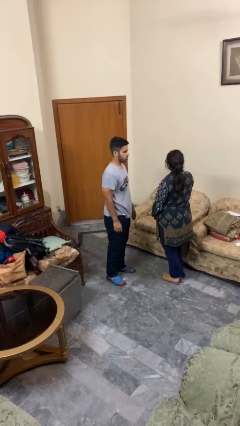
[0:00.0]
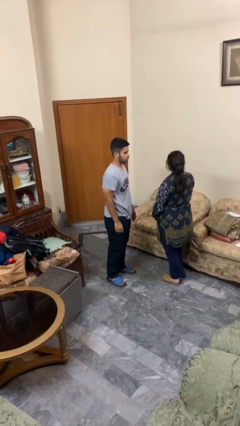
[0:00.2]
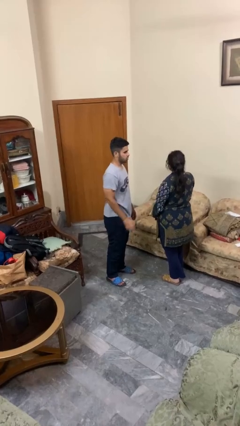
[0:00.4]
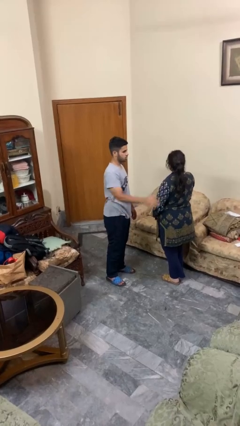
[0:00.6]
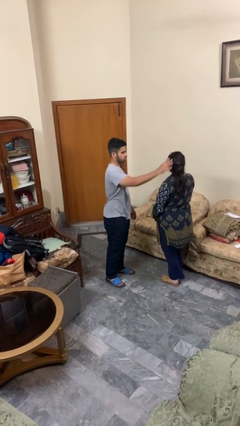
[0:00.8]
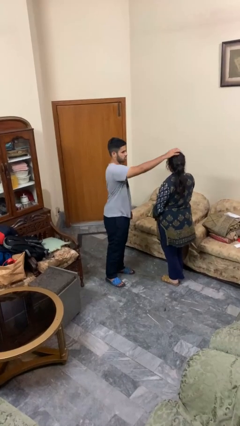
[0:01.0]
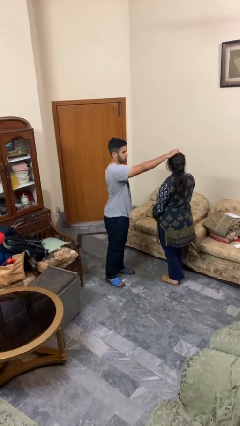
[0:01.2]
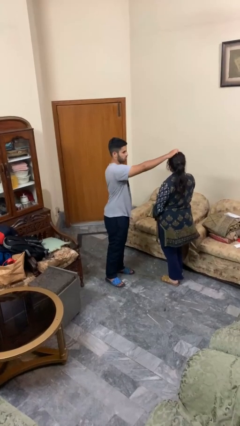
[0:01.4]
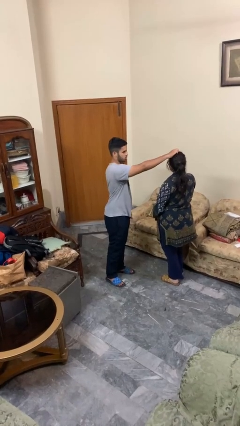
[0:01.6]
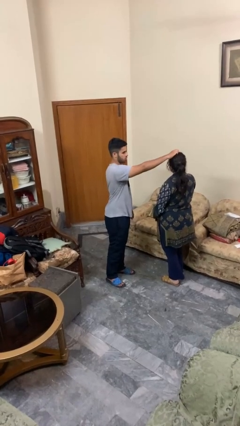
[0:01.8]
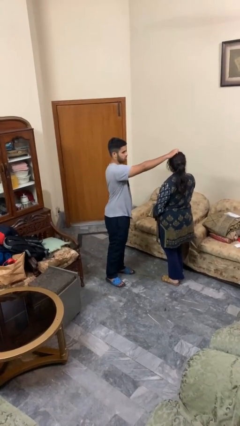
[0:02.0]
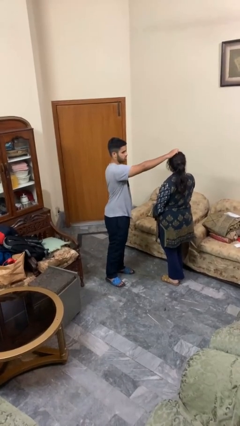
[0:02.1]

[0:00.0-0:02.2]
person grabs person by hair

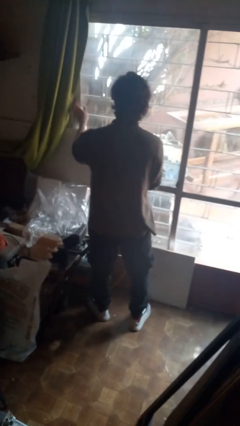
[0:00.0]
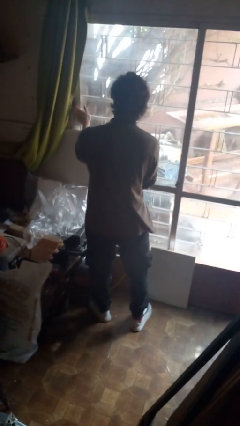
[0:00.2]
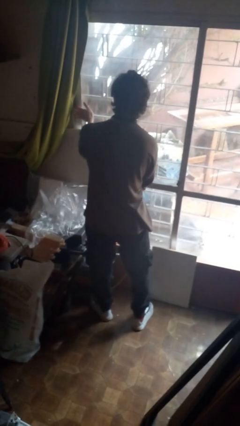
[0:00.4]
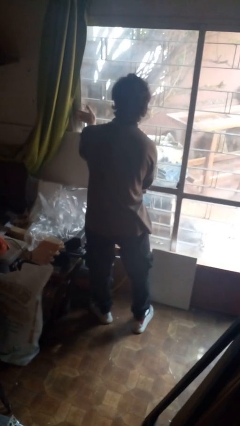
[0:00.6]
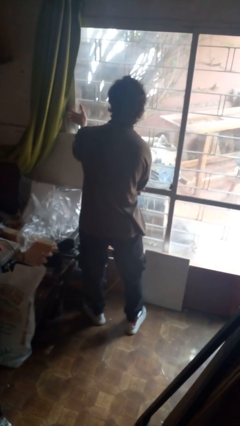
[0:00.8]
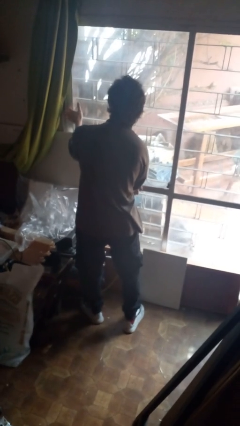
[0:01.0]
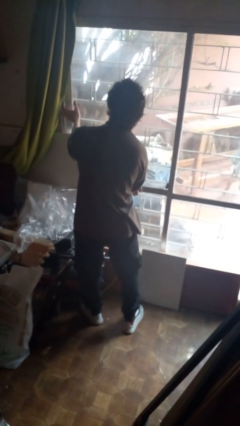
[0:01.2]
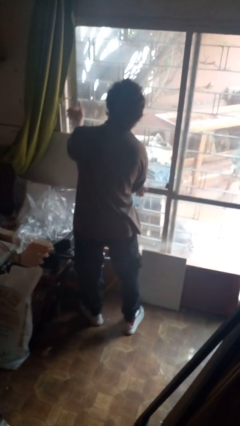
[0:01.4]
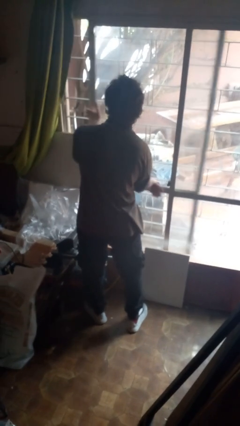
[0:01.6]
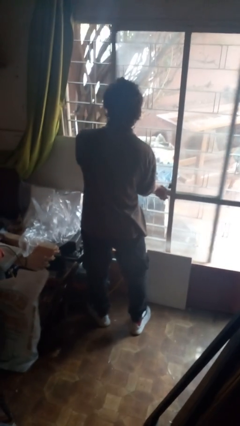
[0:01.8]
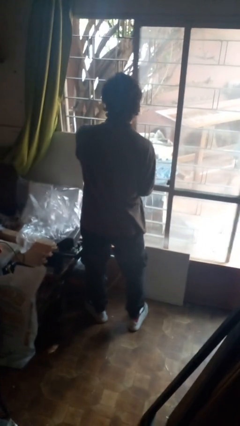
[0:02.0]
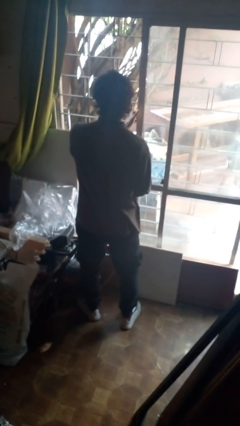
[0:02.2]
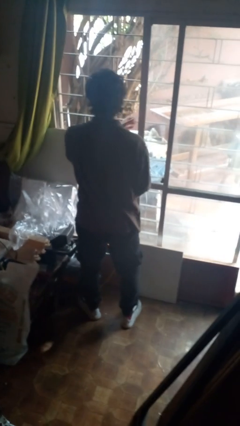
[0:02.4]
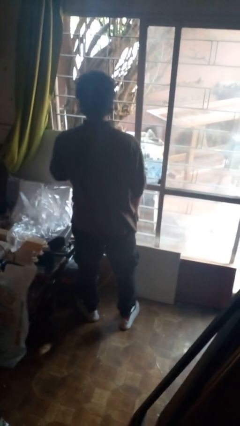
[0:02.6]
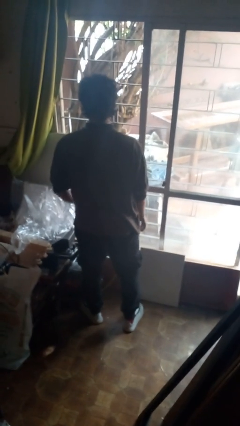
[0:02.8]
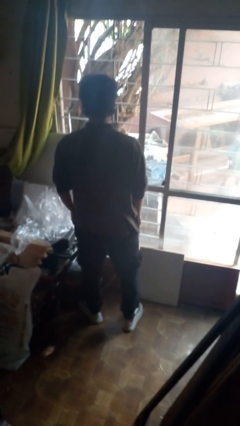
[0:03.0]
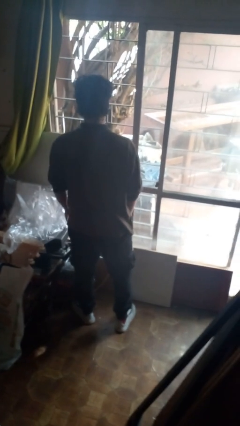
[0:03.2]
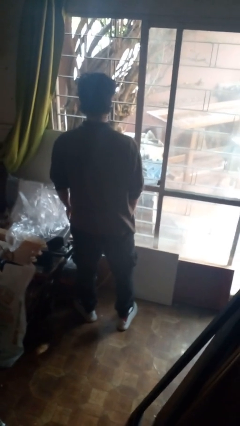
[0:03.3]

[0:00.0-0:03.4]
person opens sliding door

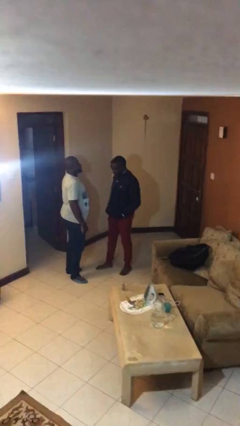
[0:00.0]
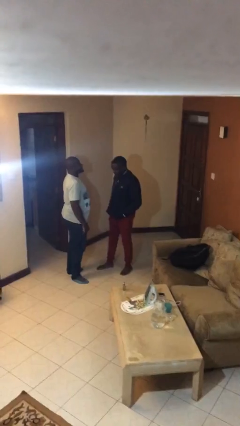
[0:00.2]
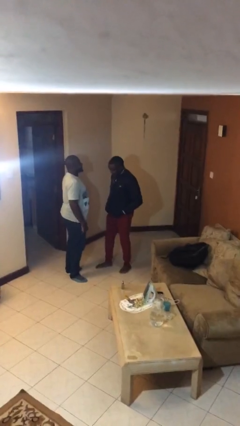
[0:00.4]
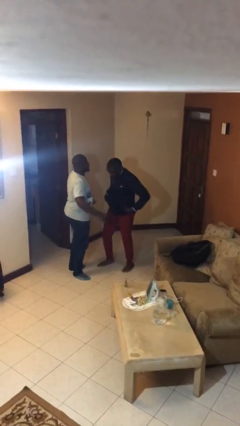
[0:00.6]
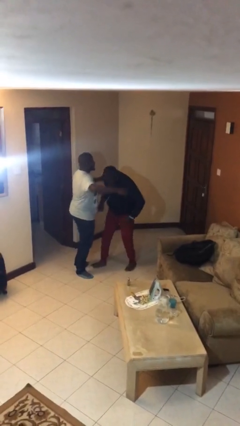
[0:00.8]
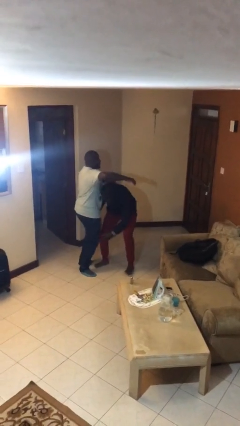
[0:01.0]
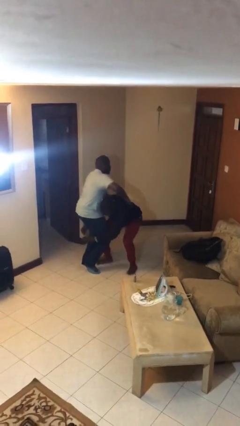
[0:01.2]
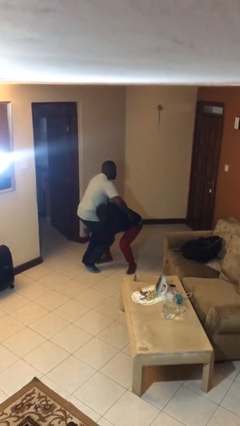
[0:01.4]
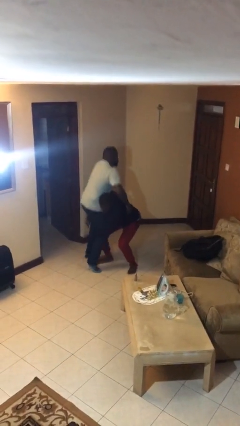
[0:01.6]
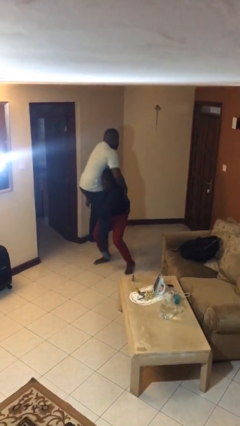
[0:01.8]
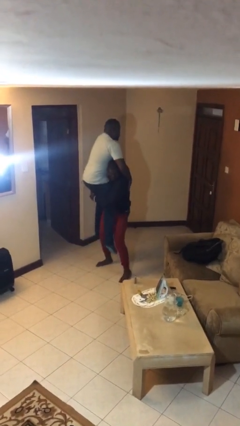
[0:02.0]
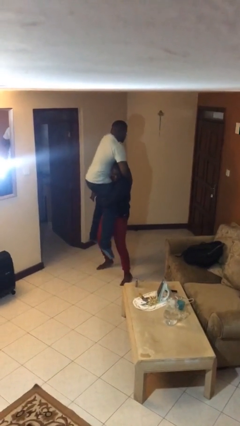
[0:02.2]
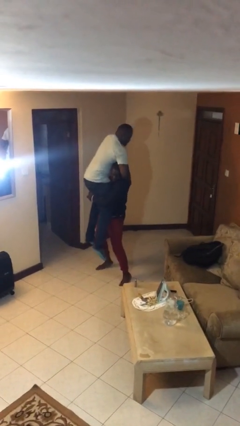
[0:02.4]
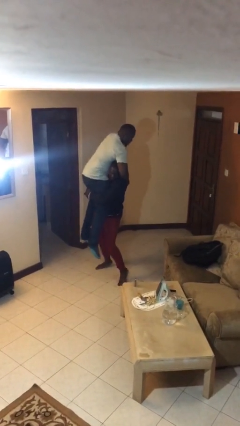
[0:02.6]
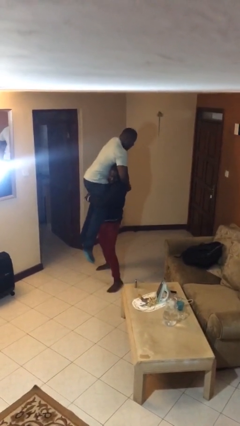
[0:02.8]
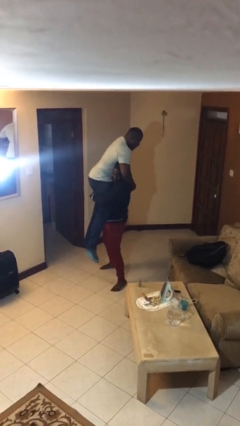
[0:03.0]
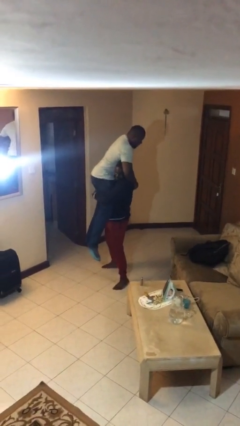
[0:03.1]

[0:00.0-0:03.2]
person picks up person

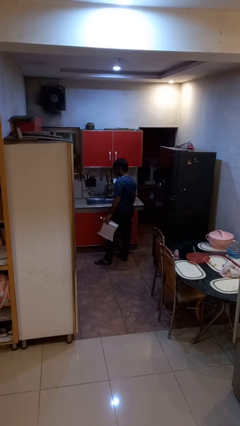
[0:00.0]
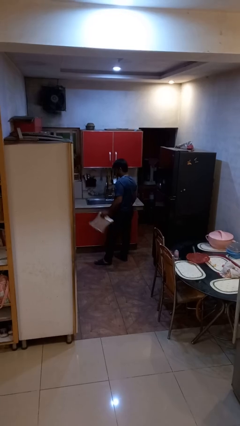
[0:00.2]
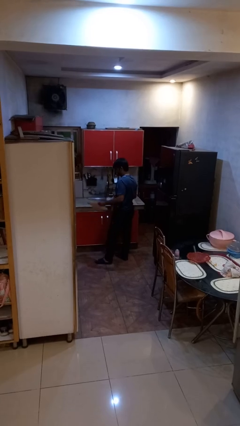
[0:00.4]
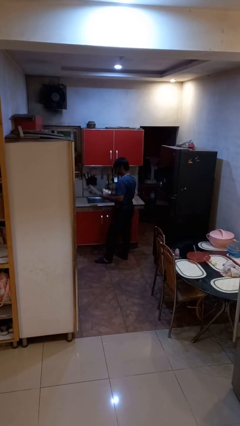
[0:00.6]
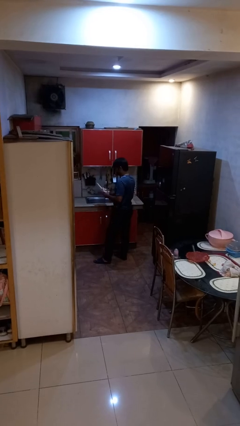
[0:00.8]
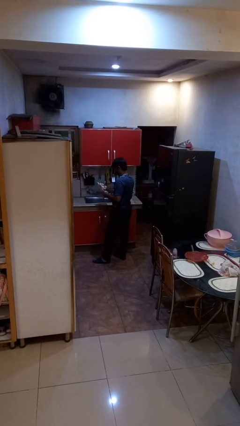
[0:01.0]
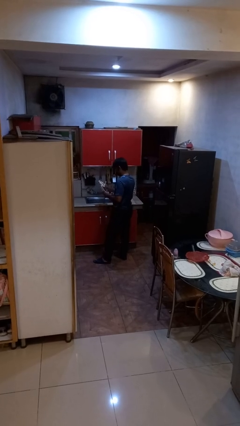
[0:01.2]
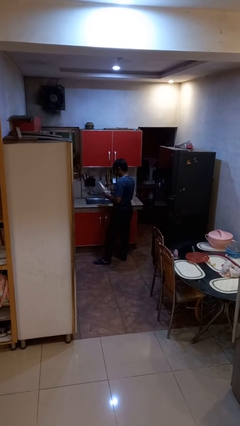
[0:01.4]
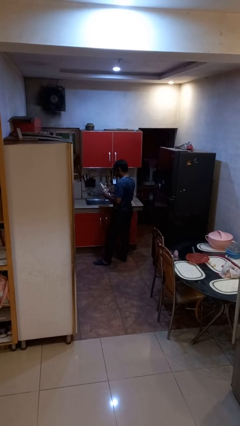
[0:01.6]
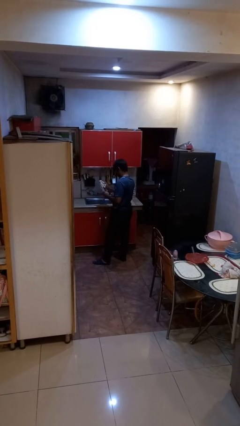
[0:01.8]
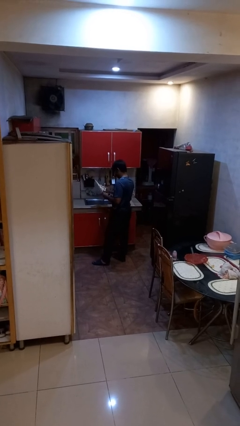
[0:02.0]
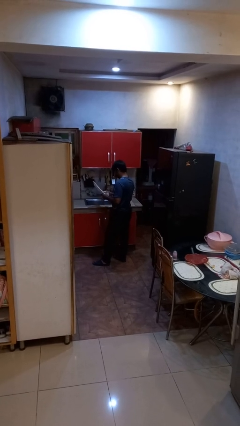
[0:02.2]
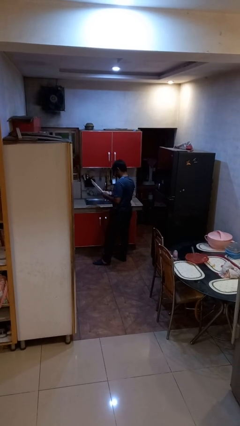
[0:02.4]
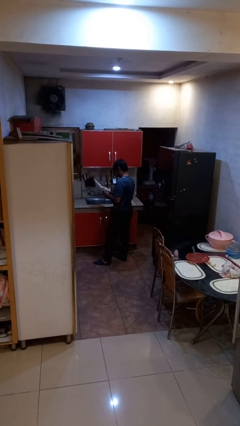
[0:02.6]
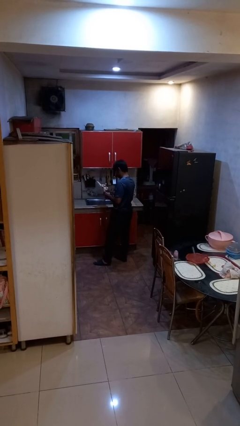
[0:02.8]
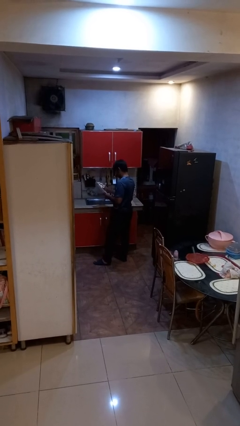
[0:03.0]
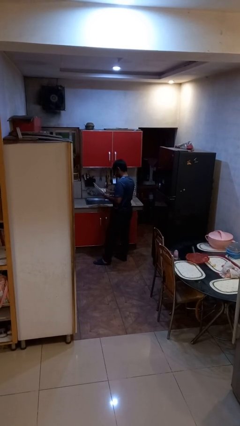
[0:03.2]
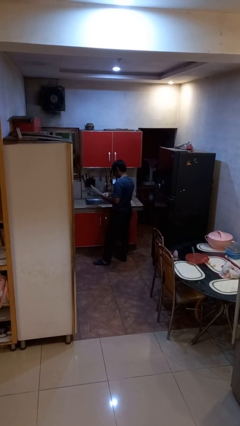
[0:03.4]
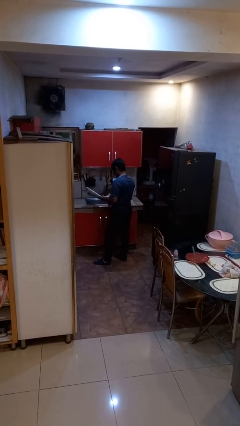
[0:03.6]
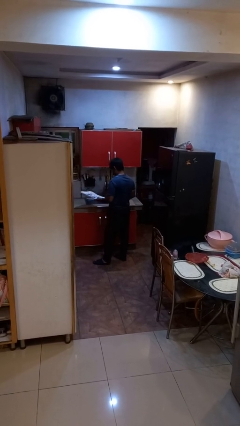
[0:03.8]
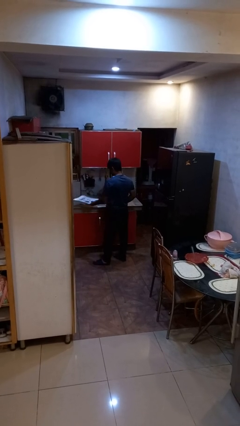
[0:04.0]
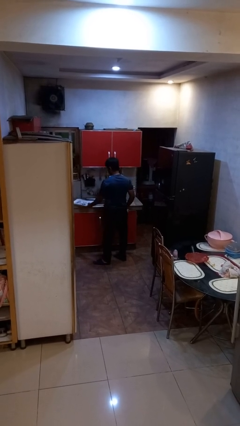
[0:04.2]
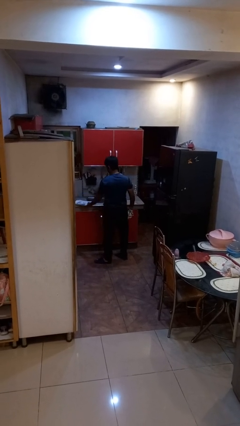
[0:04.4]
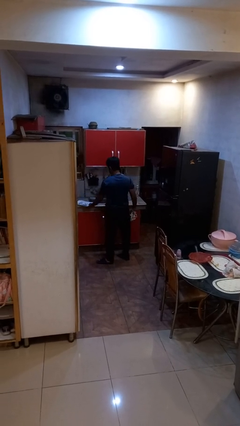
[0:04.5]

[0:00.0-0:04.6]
person dries dish

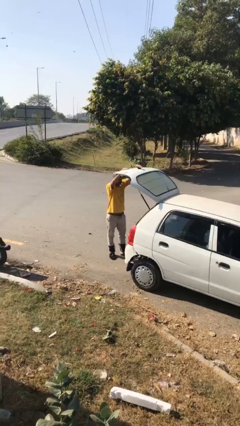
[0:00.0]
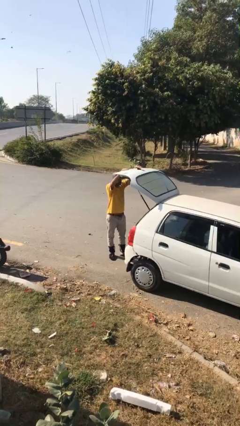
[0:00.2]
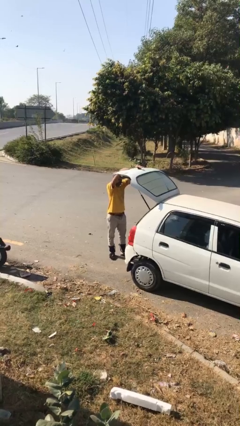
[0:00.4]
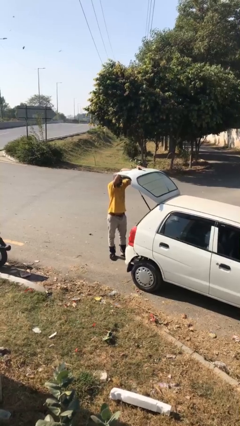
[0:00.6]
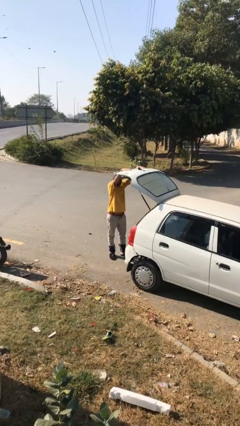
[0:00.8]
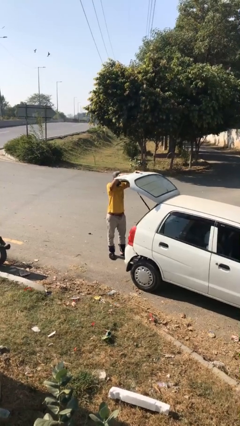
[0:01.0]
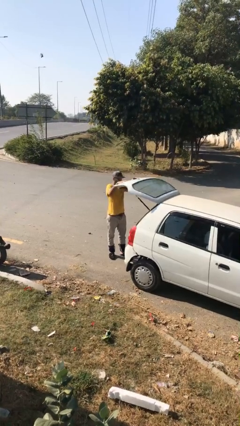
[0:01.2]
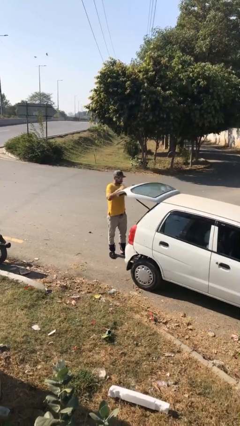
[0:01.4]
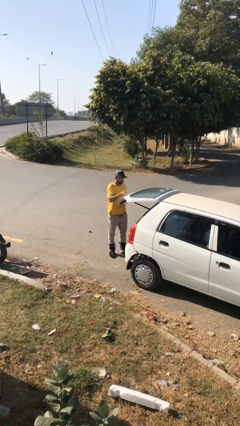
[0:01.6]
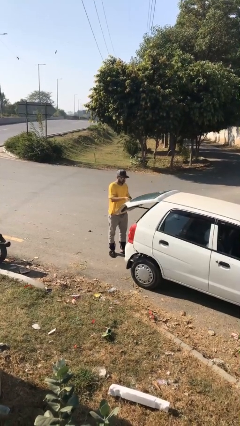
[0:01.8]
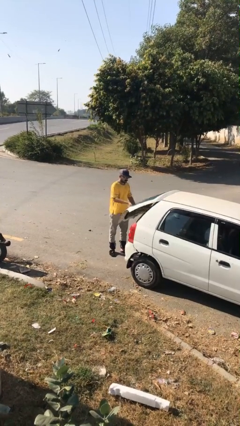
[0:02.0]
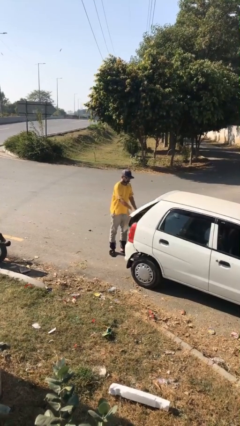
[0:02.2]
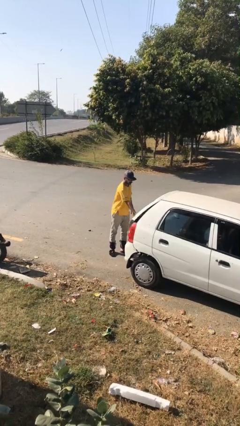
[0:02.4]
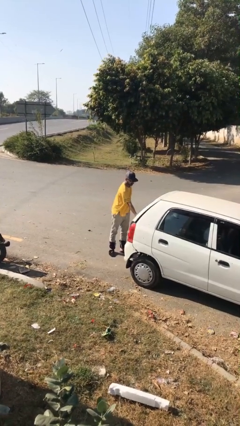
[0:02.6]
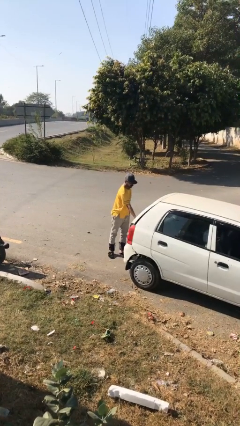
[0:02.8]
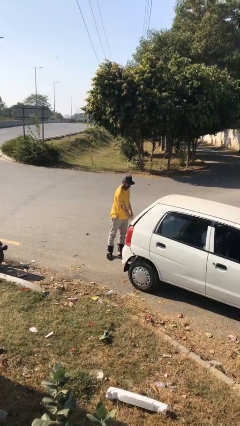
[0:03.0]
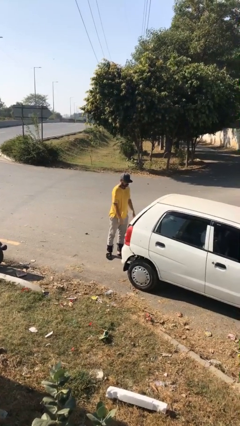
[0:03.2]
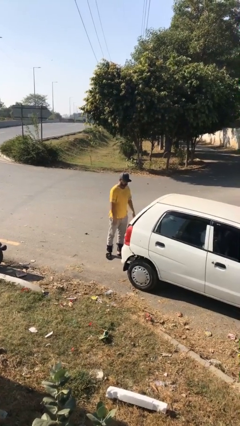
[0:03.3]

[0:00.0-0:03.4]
person closes car trunk

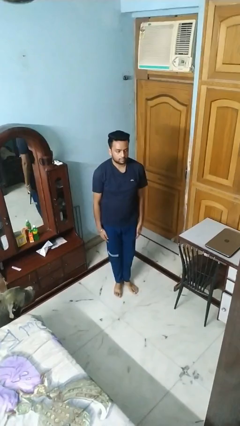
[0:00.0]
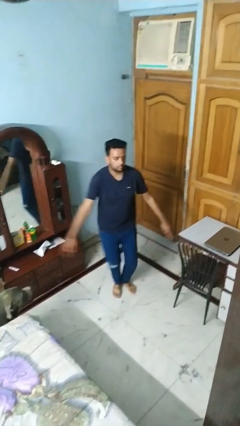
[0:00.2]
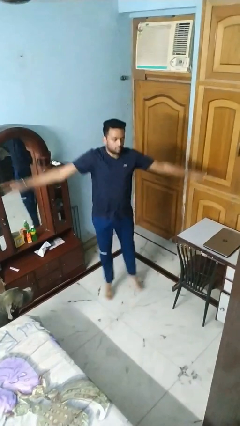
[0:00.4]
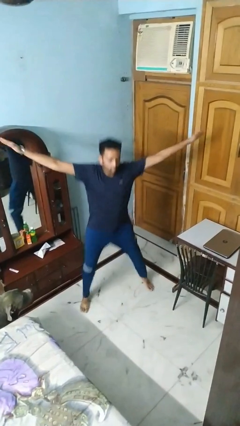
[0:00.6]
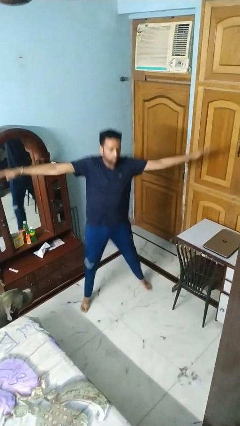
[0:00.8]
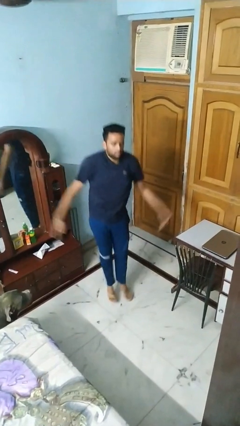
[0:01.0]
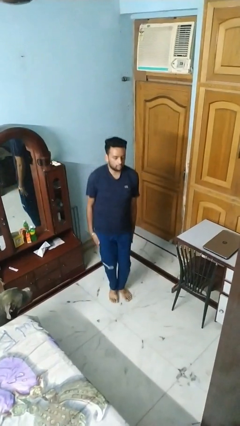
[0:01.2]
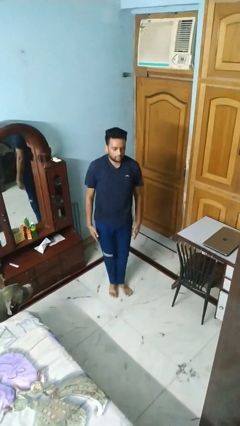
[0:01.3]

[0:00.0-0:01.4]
person exercises with jumping jacks
